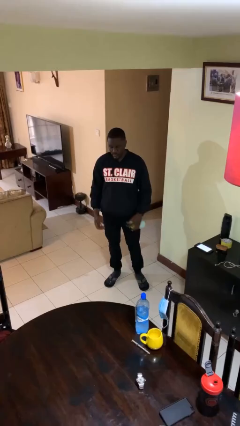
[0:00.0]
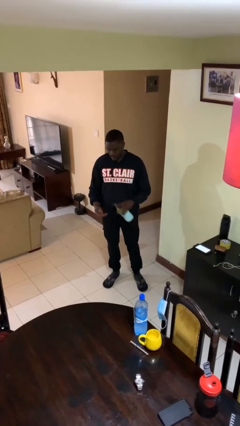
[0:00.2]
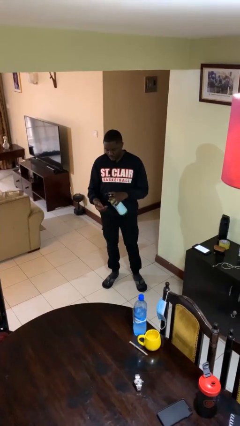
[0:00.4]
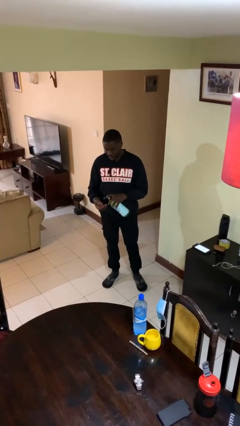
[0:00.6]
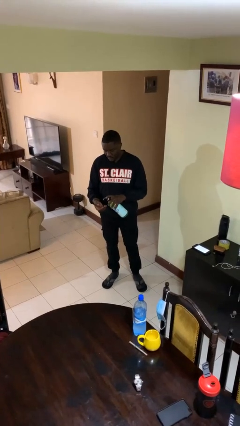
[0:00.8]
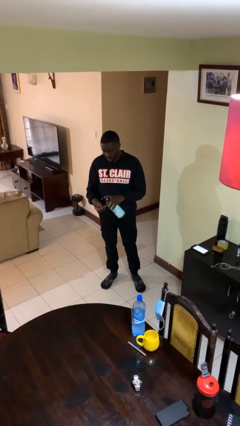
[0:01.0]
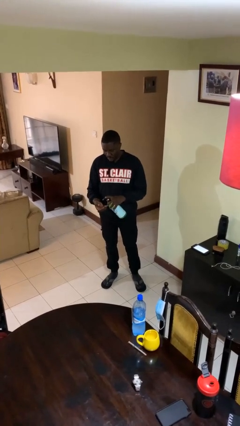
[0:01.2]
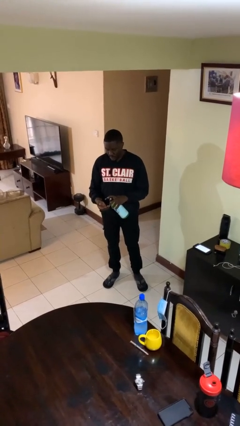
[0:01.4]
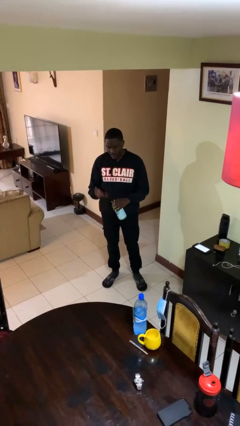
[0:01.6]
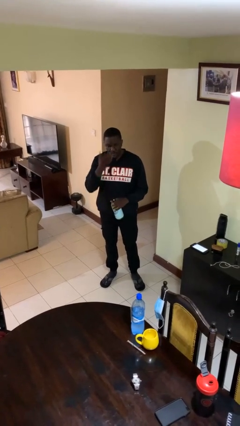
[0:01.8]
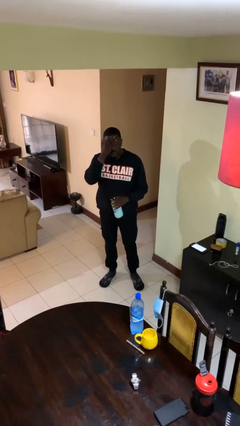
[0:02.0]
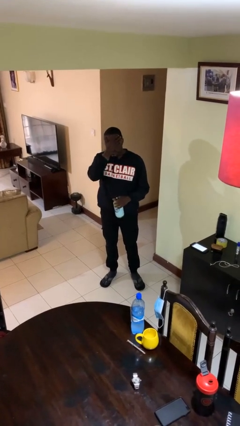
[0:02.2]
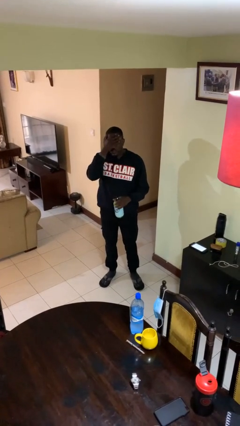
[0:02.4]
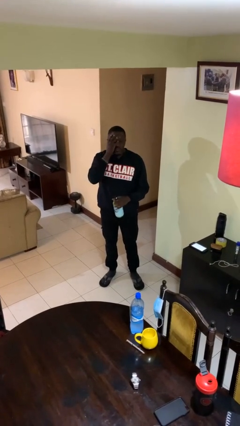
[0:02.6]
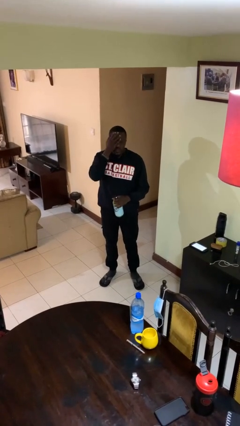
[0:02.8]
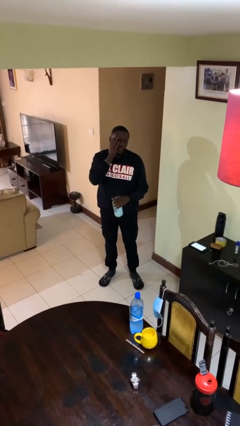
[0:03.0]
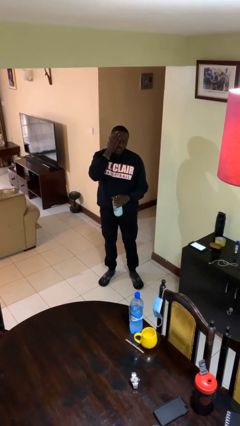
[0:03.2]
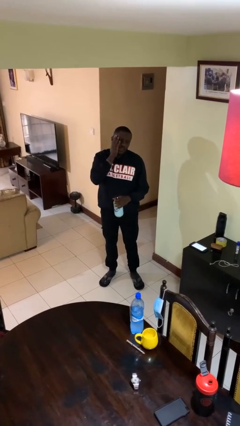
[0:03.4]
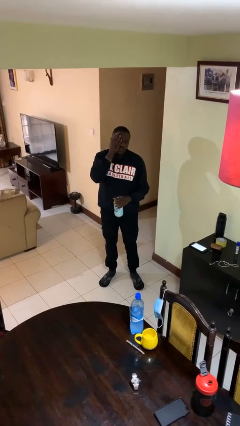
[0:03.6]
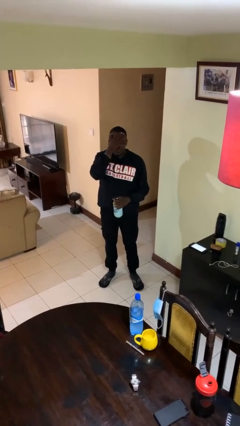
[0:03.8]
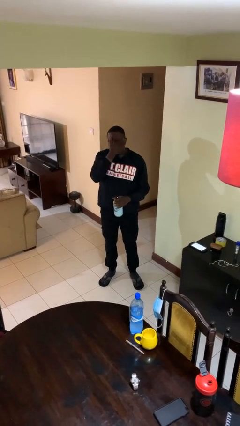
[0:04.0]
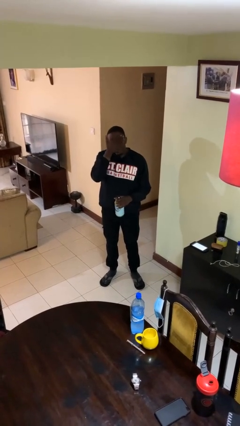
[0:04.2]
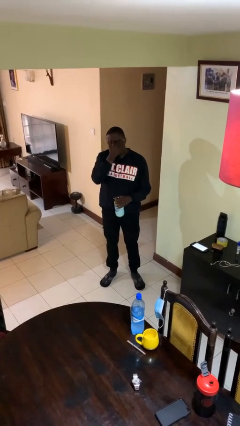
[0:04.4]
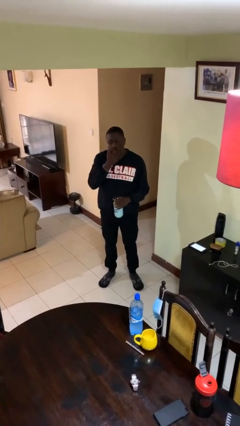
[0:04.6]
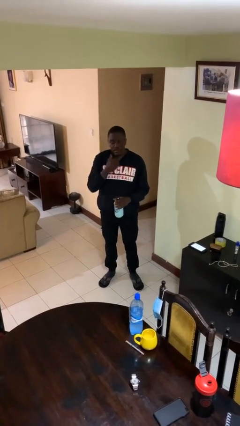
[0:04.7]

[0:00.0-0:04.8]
person applies facial moisturizer

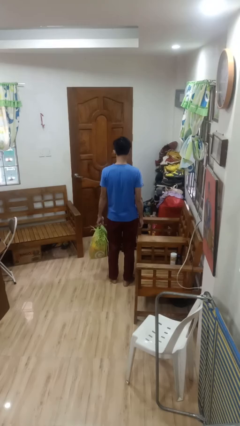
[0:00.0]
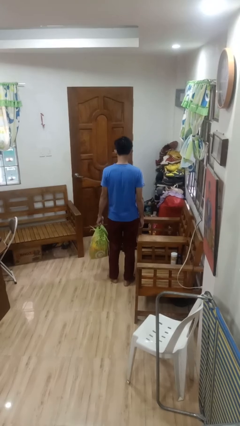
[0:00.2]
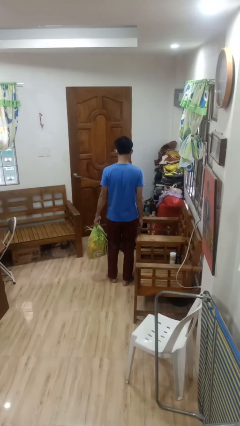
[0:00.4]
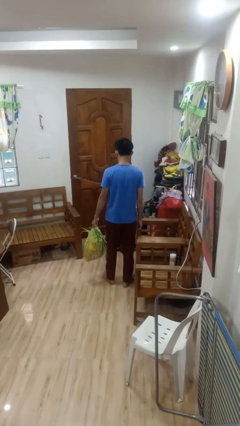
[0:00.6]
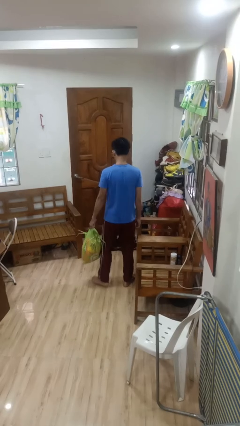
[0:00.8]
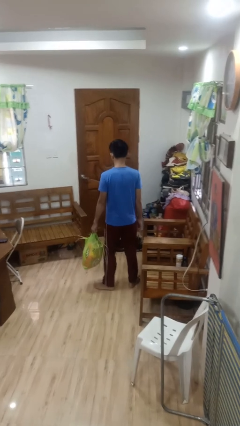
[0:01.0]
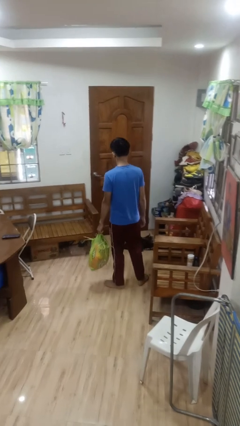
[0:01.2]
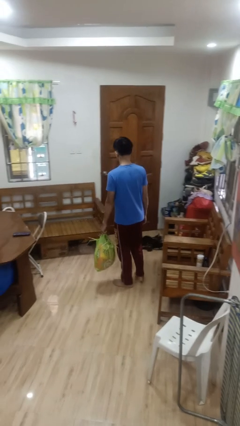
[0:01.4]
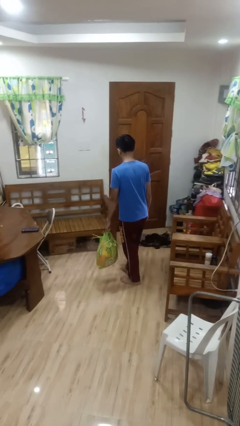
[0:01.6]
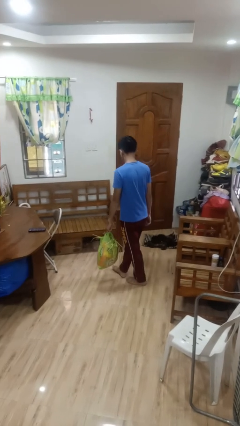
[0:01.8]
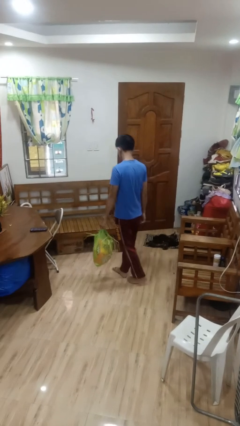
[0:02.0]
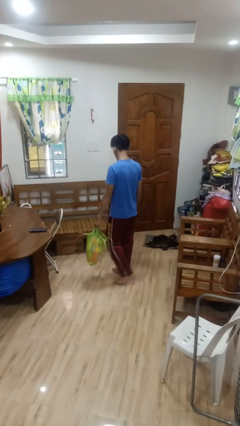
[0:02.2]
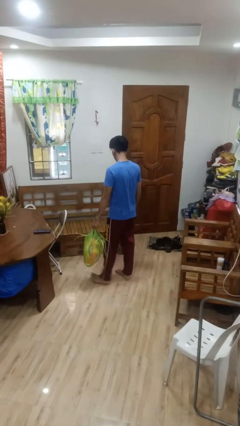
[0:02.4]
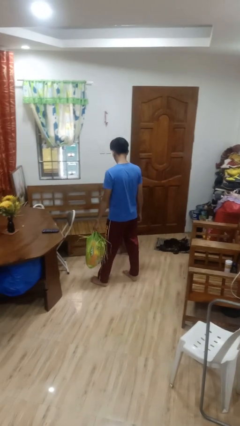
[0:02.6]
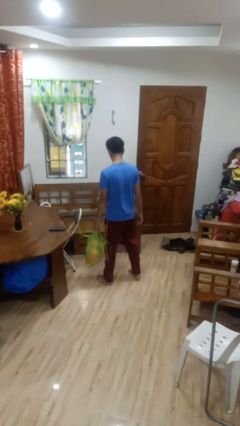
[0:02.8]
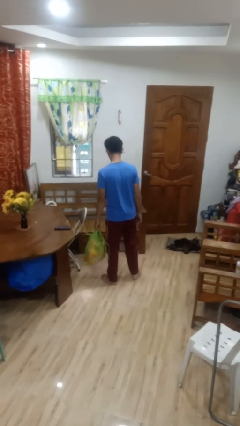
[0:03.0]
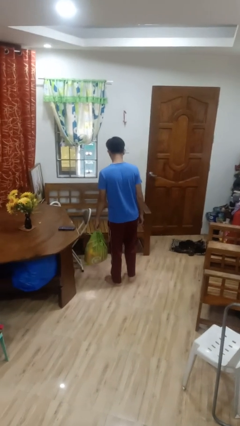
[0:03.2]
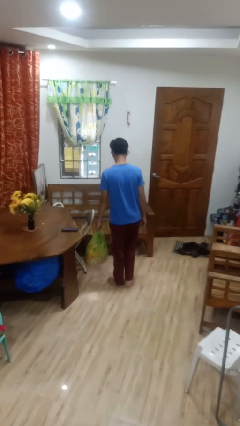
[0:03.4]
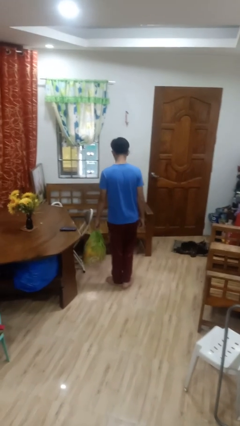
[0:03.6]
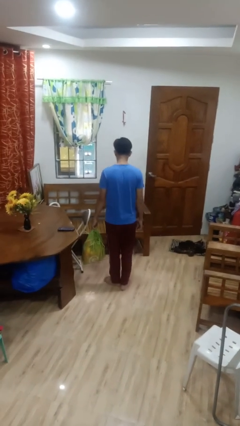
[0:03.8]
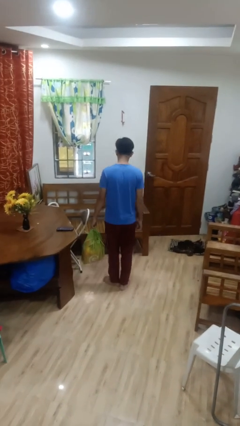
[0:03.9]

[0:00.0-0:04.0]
person carries groceries

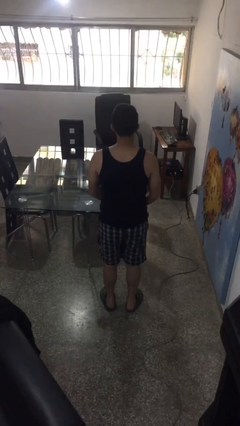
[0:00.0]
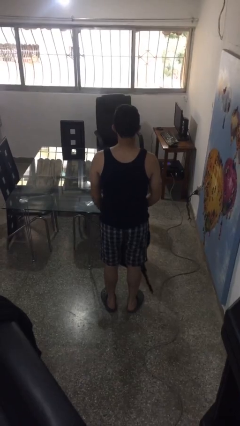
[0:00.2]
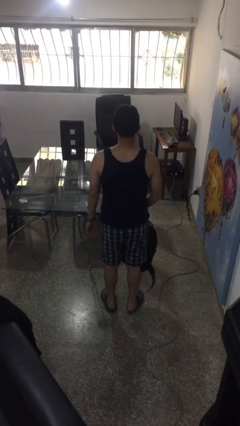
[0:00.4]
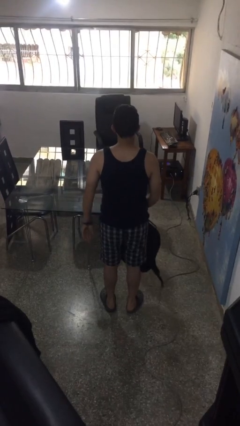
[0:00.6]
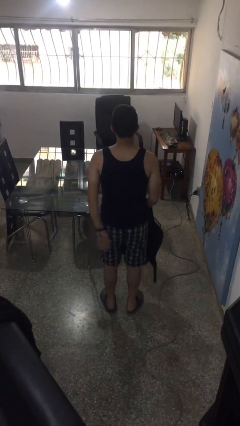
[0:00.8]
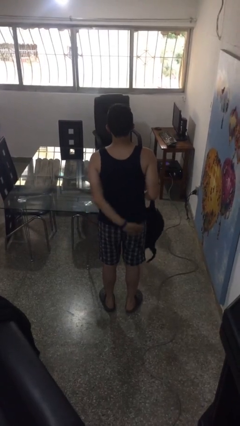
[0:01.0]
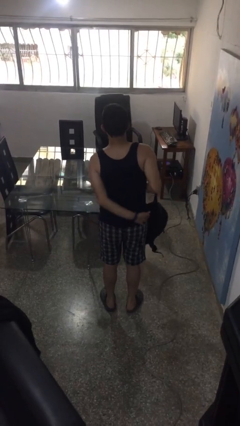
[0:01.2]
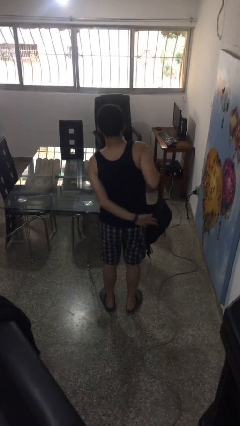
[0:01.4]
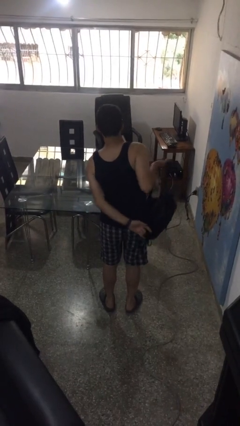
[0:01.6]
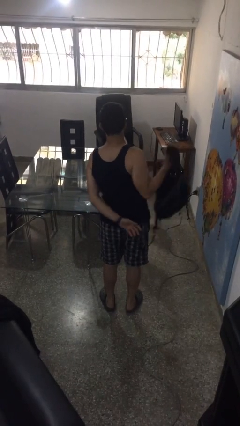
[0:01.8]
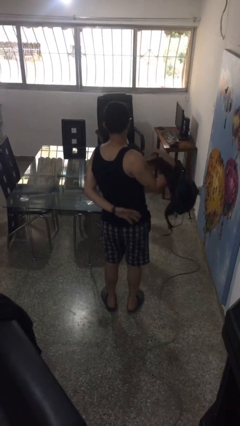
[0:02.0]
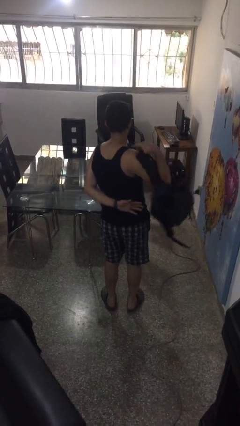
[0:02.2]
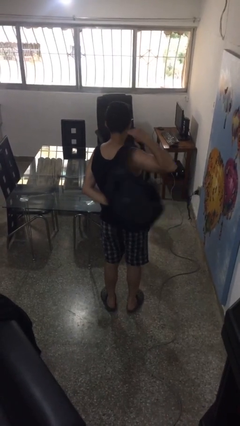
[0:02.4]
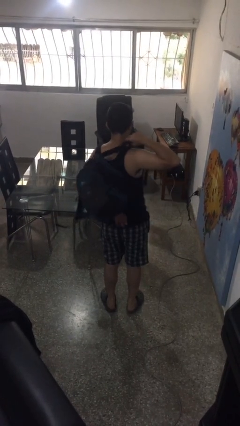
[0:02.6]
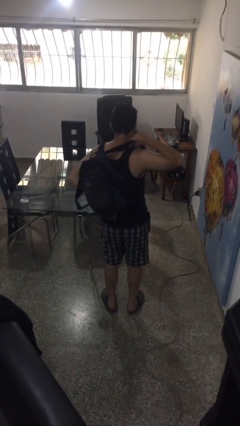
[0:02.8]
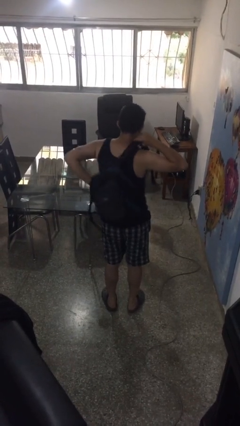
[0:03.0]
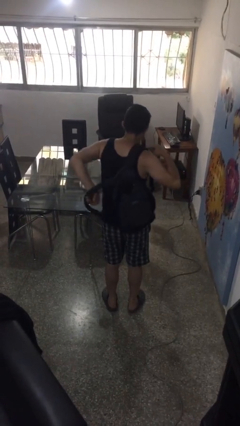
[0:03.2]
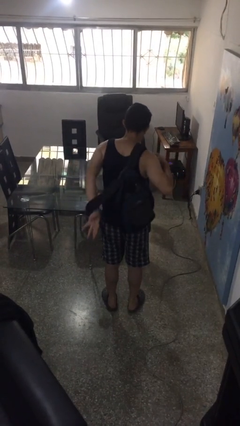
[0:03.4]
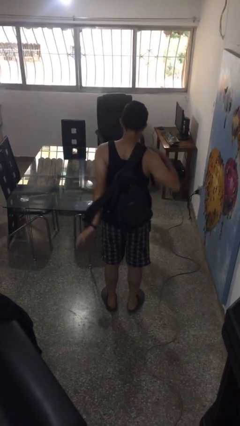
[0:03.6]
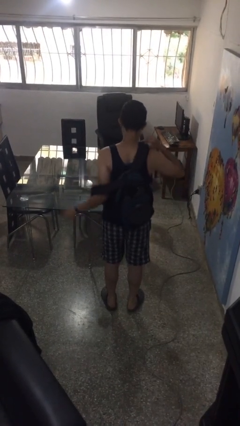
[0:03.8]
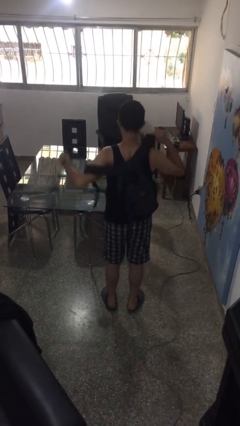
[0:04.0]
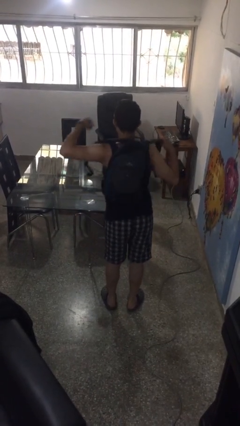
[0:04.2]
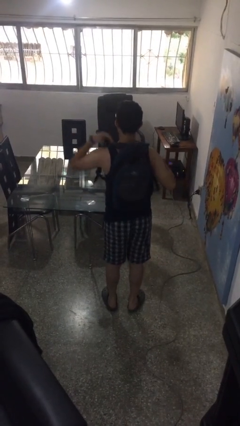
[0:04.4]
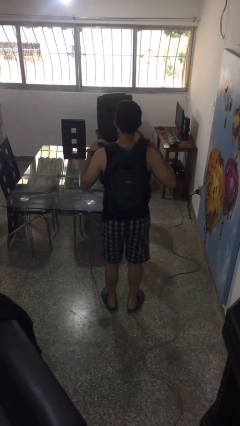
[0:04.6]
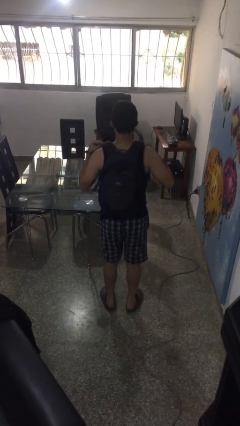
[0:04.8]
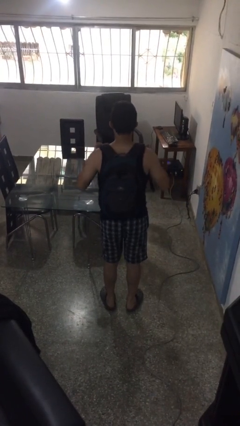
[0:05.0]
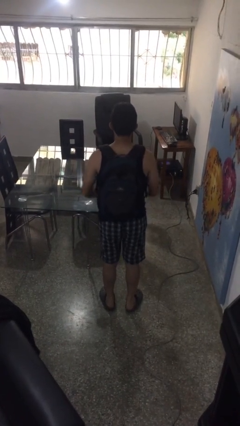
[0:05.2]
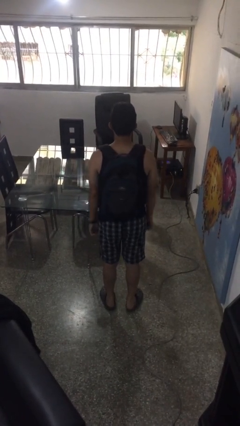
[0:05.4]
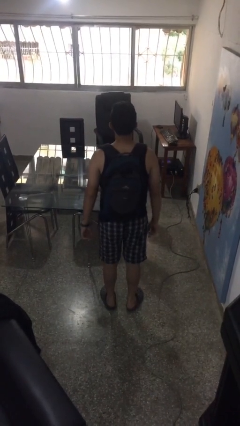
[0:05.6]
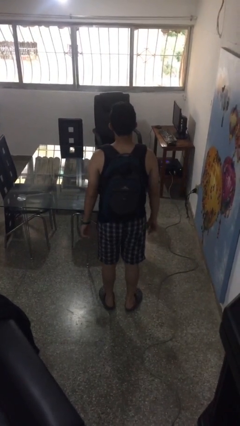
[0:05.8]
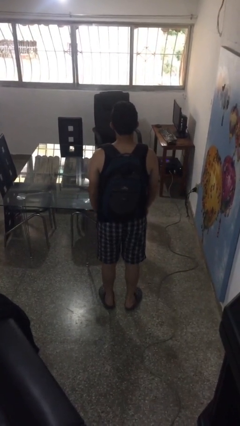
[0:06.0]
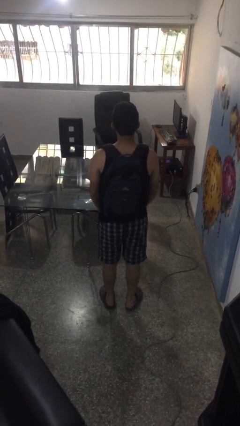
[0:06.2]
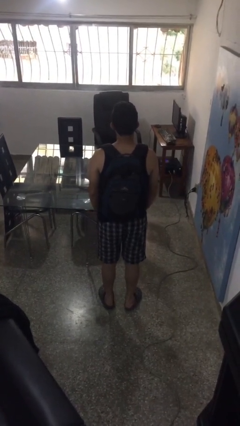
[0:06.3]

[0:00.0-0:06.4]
person puts on backpack

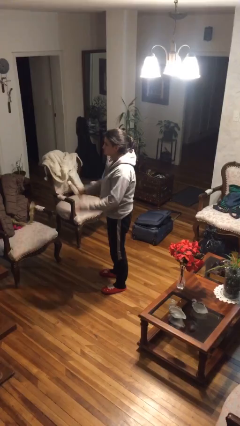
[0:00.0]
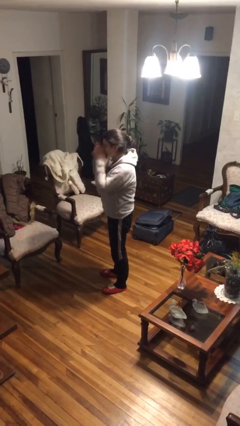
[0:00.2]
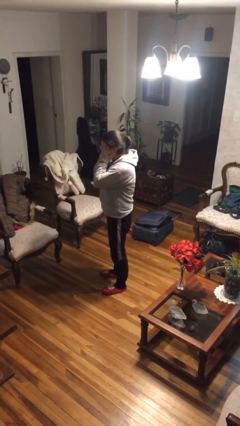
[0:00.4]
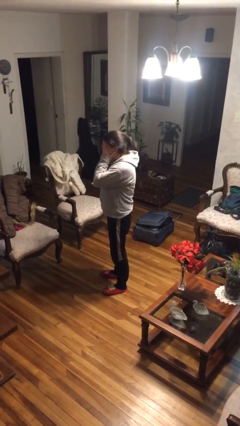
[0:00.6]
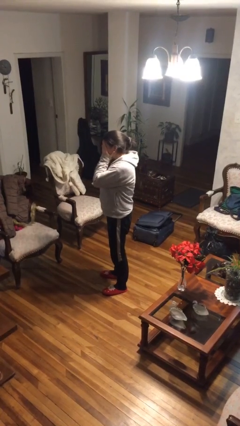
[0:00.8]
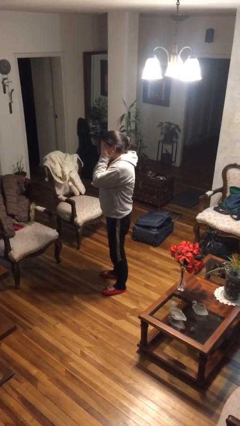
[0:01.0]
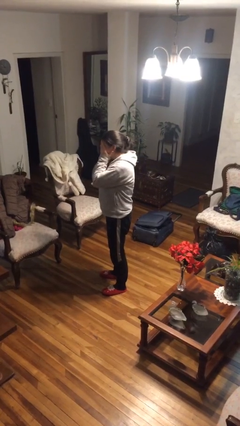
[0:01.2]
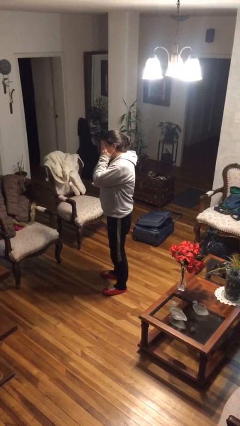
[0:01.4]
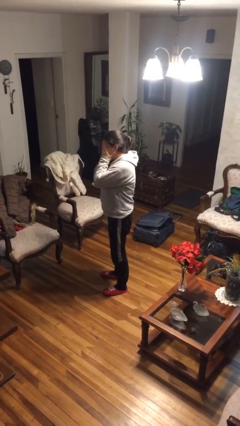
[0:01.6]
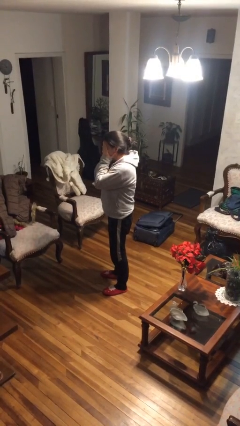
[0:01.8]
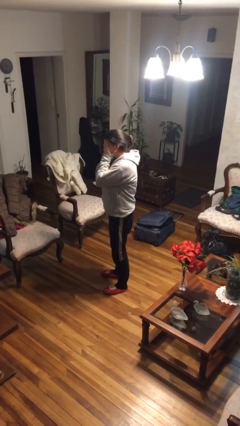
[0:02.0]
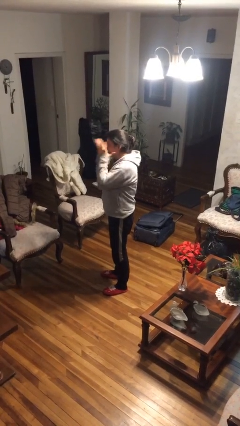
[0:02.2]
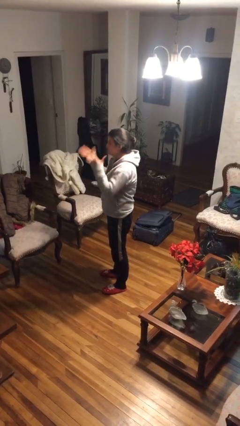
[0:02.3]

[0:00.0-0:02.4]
person covers face with hands

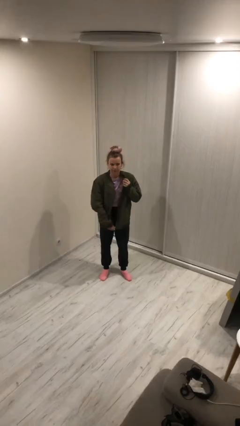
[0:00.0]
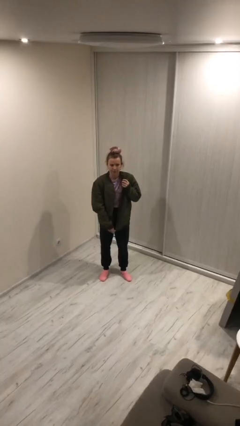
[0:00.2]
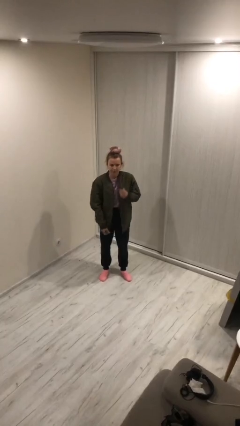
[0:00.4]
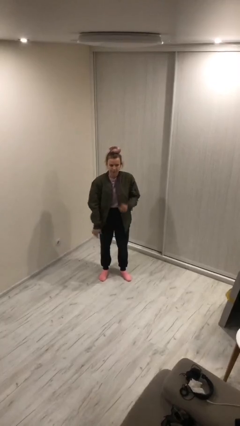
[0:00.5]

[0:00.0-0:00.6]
person unzips jacket
